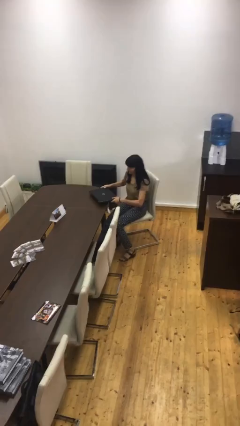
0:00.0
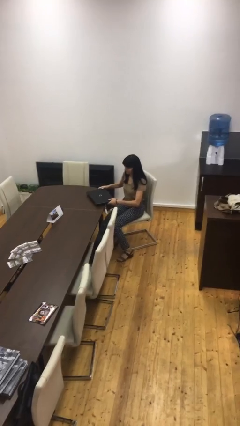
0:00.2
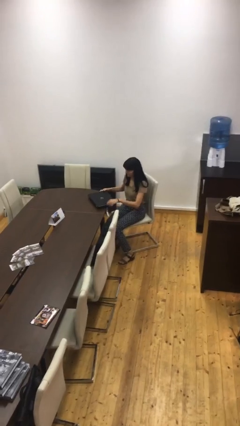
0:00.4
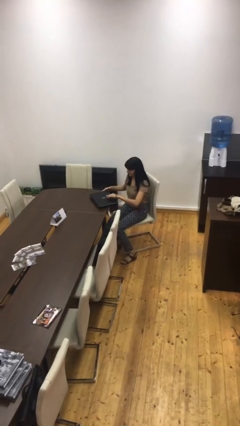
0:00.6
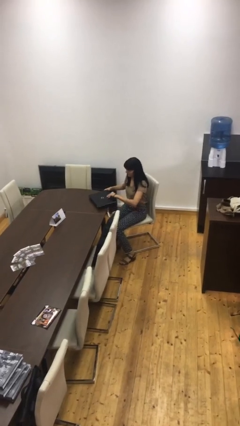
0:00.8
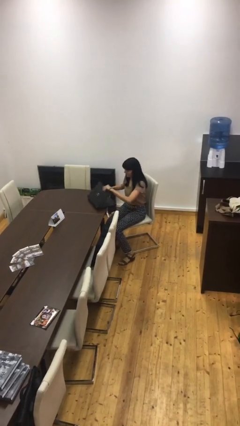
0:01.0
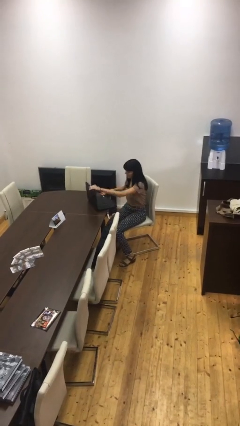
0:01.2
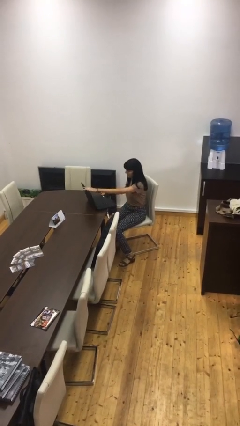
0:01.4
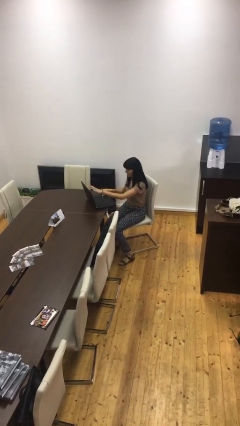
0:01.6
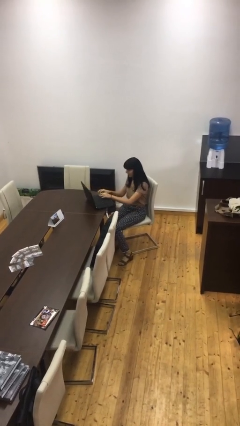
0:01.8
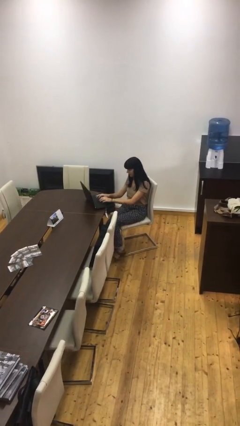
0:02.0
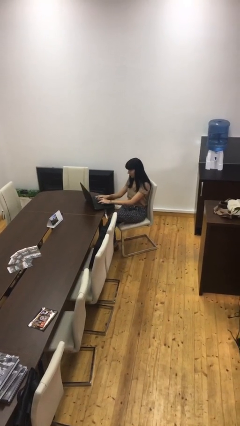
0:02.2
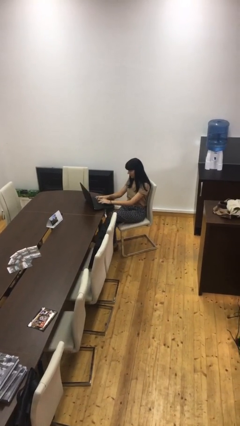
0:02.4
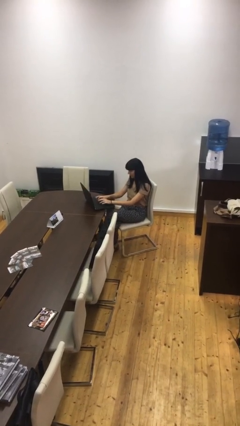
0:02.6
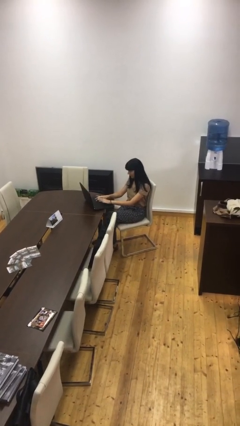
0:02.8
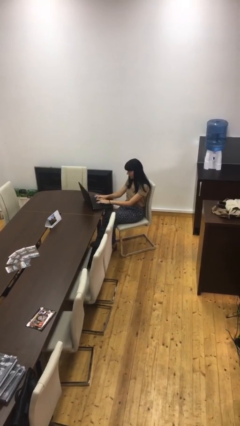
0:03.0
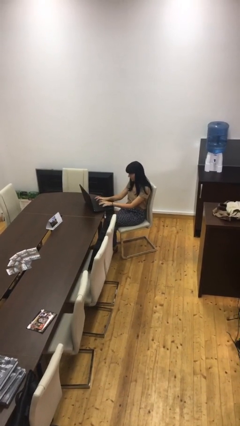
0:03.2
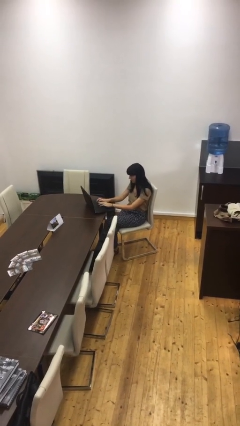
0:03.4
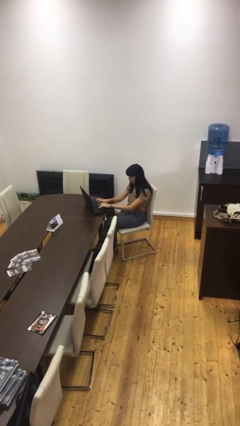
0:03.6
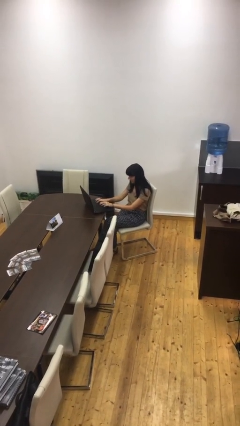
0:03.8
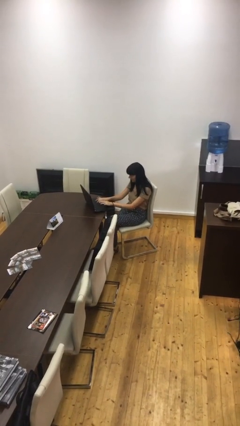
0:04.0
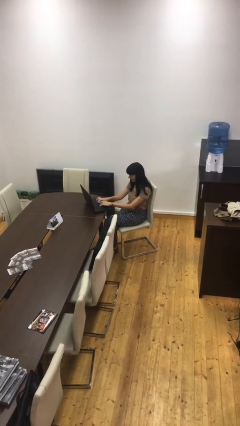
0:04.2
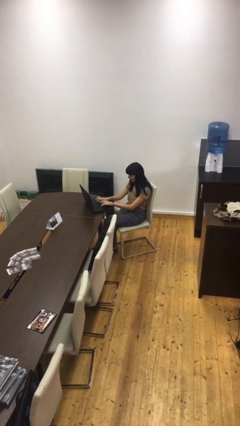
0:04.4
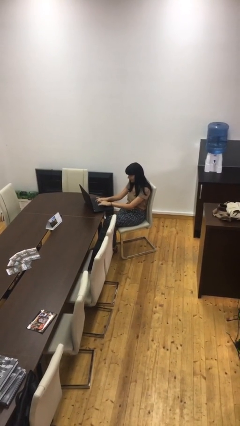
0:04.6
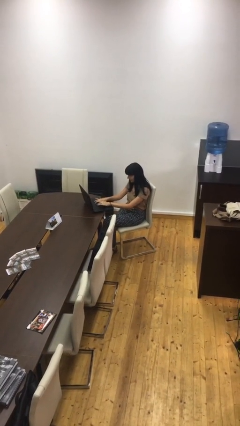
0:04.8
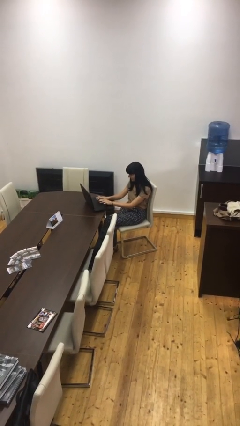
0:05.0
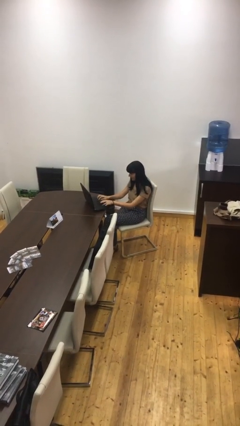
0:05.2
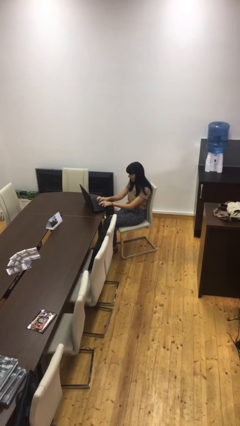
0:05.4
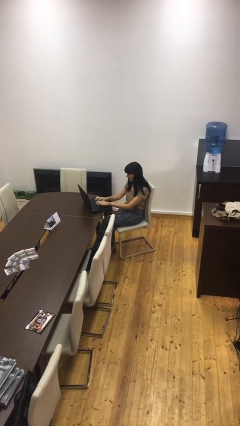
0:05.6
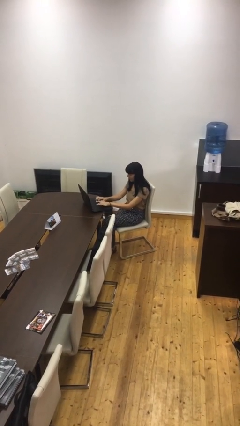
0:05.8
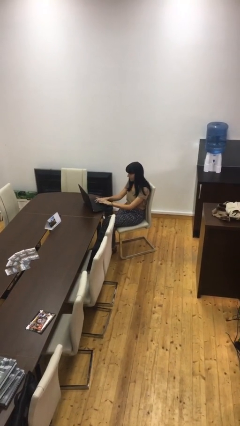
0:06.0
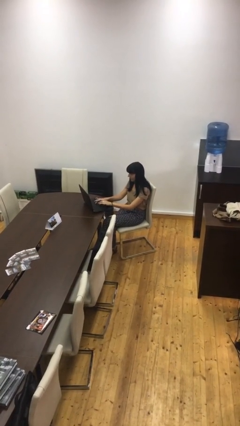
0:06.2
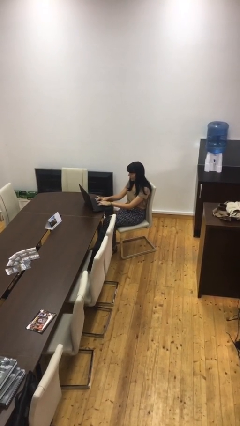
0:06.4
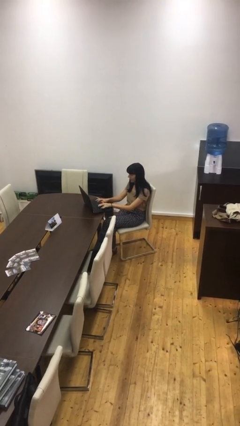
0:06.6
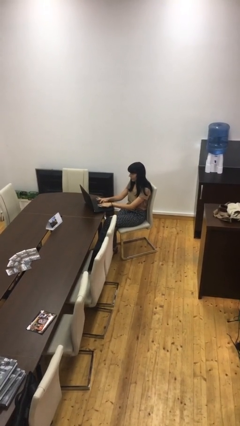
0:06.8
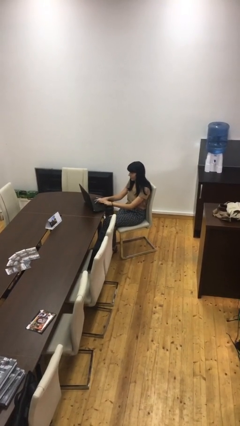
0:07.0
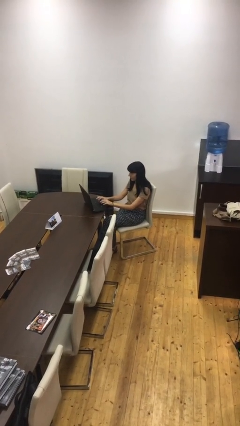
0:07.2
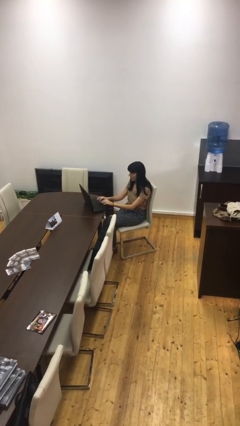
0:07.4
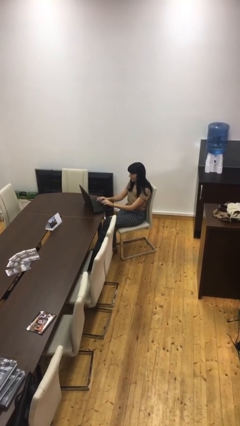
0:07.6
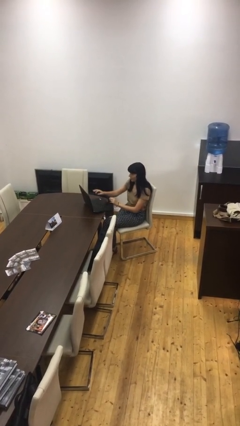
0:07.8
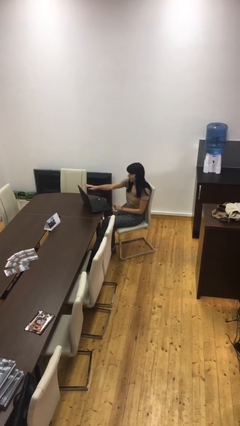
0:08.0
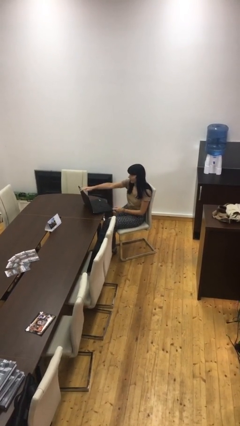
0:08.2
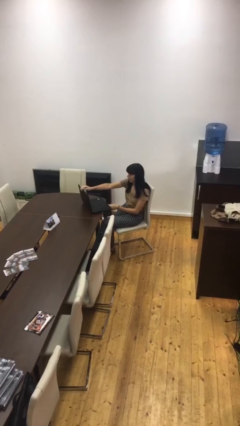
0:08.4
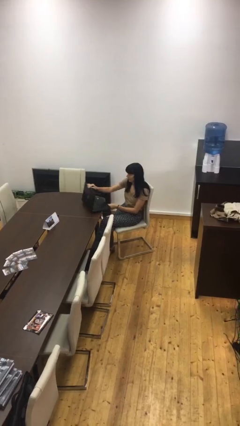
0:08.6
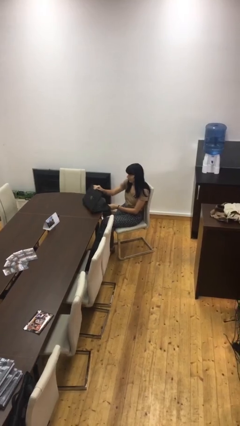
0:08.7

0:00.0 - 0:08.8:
person interacts with laptop

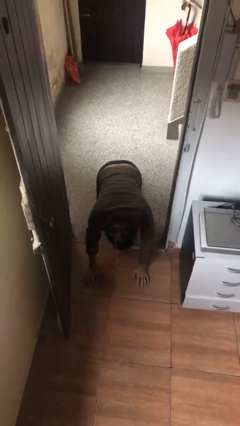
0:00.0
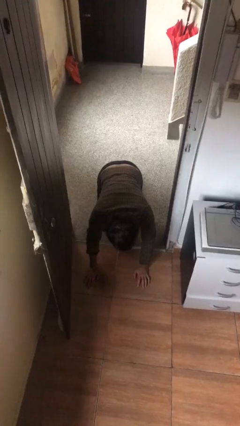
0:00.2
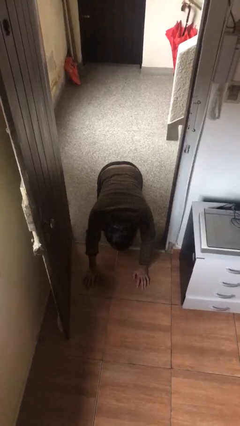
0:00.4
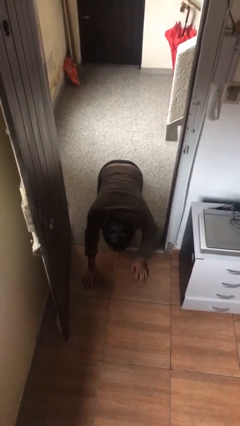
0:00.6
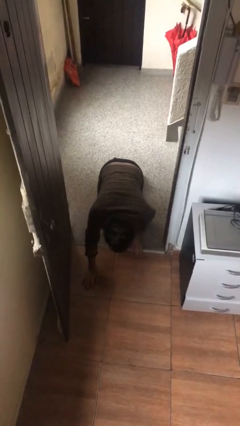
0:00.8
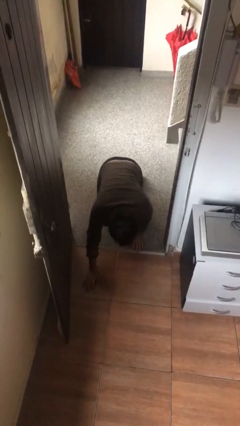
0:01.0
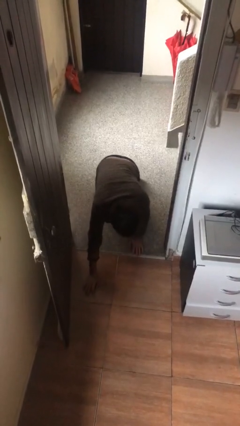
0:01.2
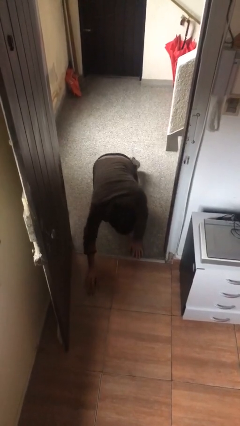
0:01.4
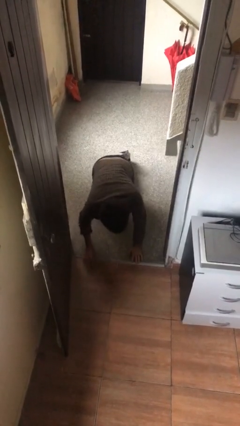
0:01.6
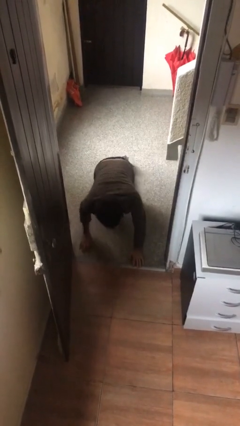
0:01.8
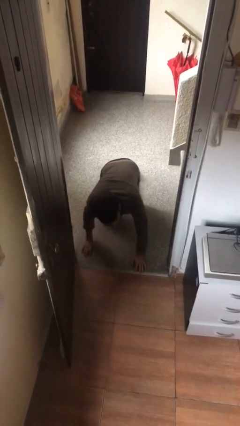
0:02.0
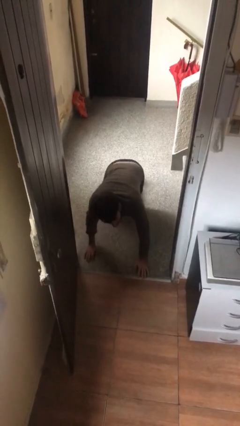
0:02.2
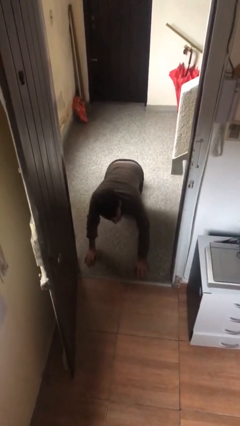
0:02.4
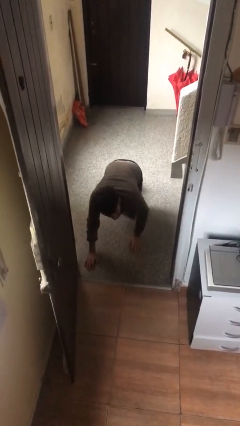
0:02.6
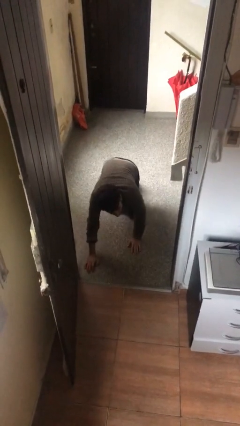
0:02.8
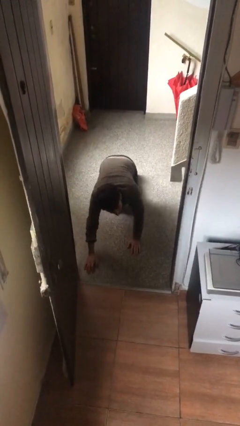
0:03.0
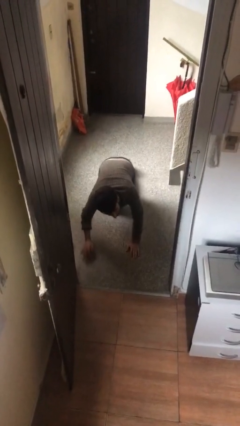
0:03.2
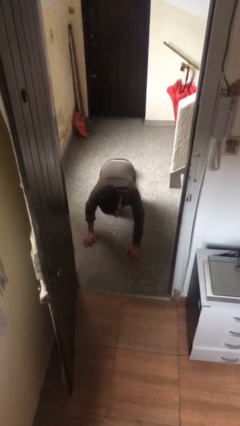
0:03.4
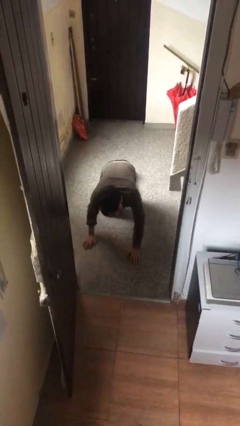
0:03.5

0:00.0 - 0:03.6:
person crawls

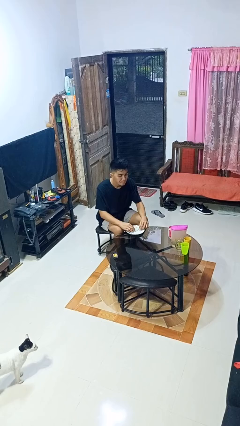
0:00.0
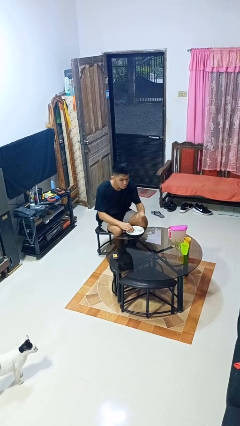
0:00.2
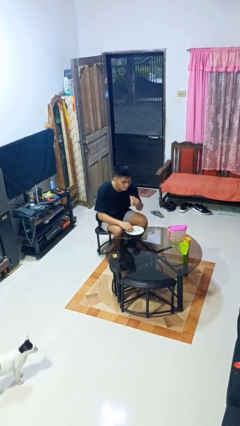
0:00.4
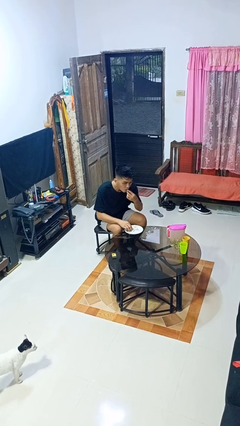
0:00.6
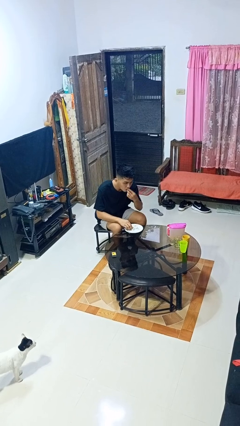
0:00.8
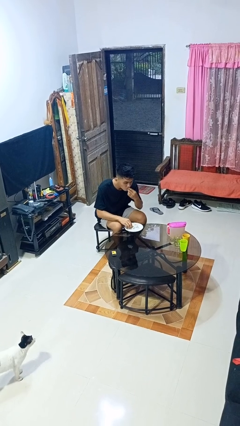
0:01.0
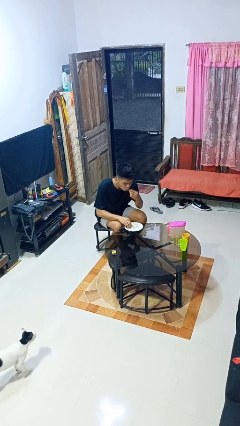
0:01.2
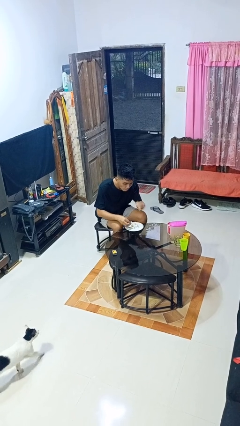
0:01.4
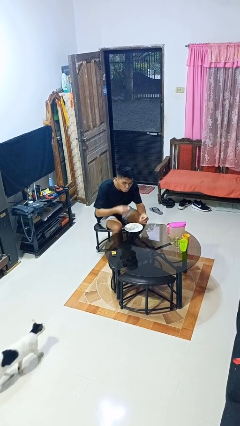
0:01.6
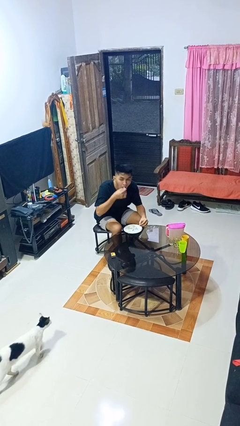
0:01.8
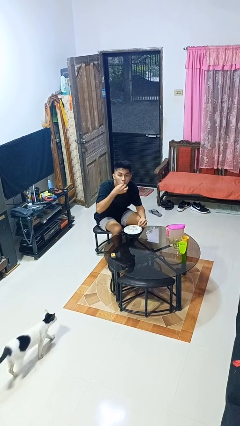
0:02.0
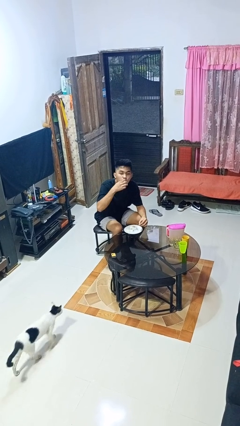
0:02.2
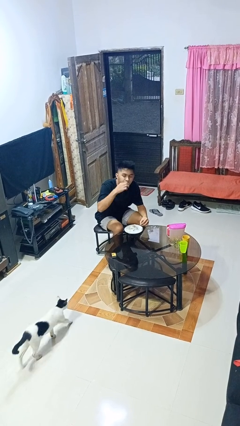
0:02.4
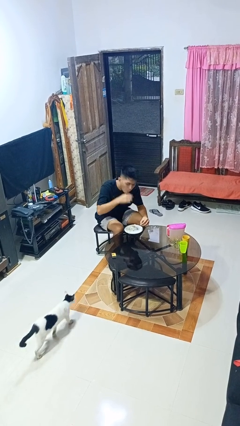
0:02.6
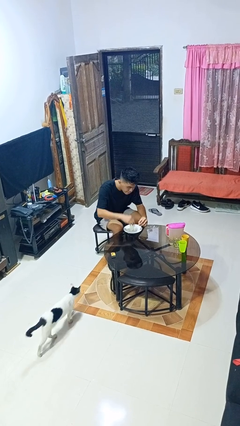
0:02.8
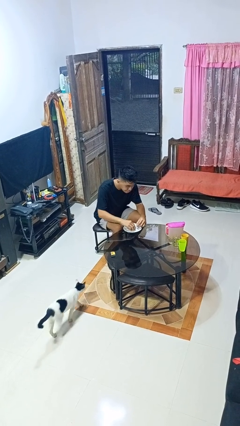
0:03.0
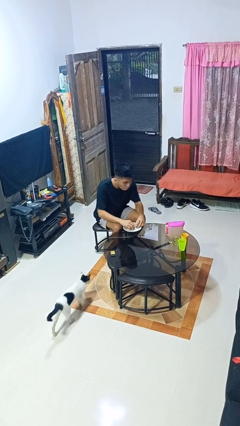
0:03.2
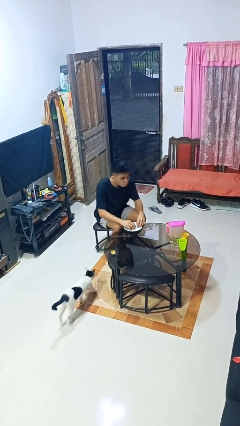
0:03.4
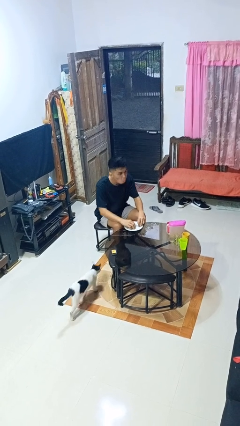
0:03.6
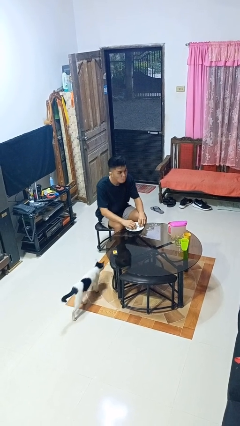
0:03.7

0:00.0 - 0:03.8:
person eats with hands

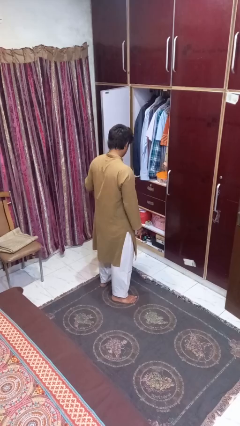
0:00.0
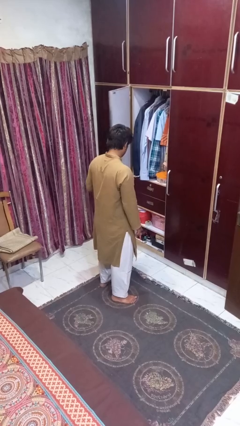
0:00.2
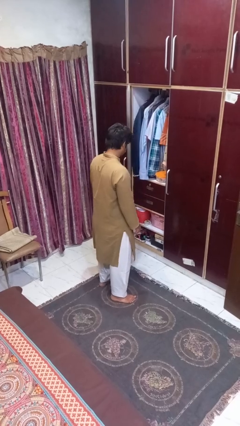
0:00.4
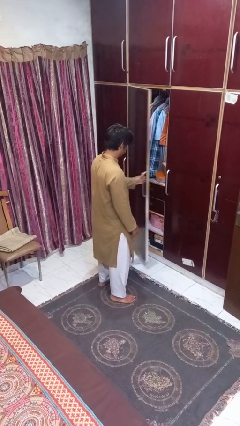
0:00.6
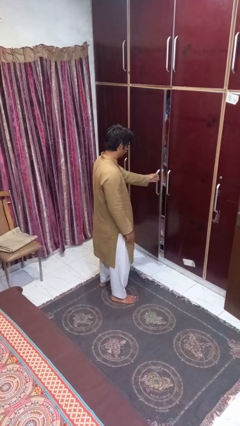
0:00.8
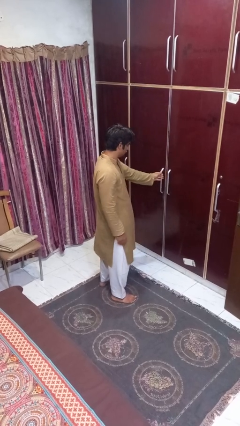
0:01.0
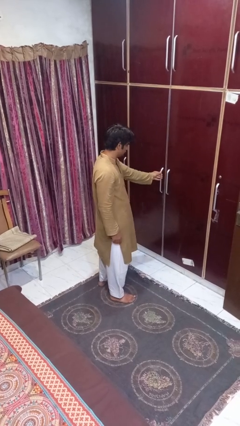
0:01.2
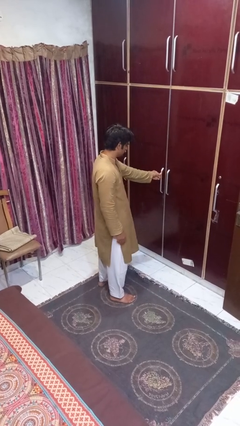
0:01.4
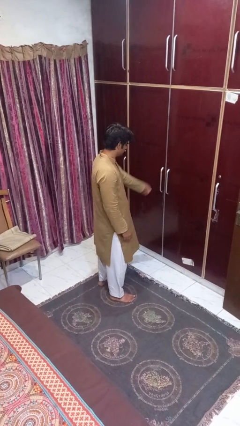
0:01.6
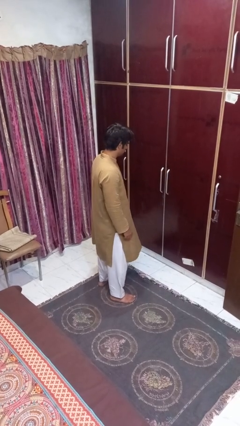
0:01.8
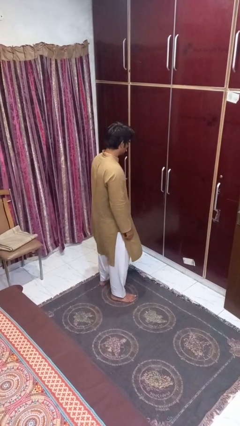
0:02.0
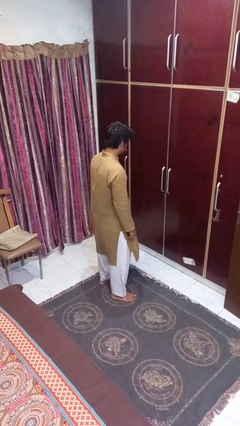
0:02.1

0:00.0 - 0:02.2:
person closes closet door
